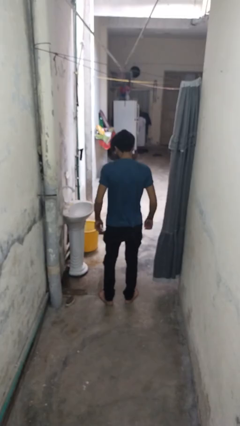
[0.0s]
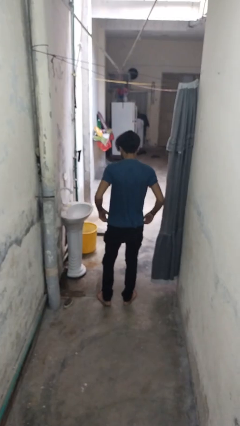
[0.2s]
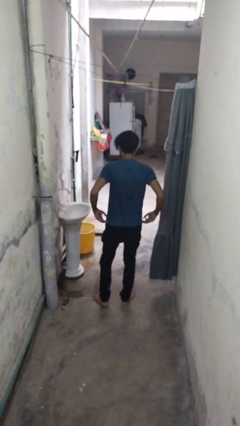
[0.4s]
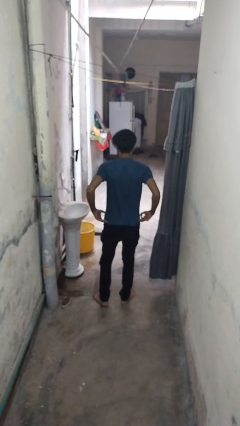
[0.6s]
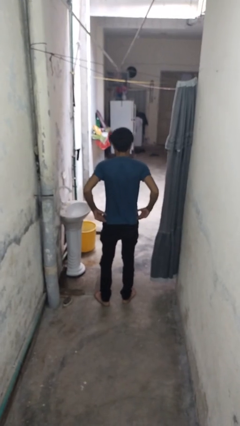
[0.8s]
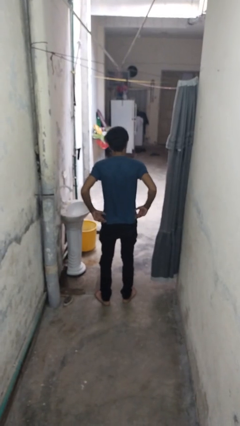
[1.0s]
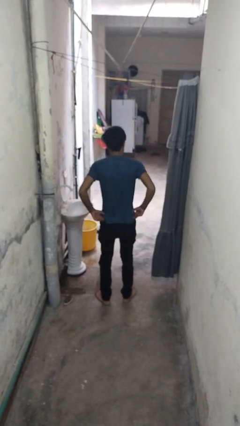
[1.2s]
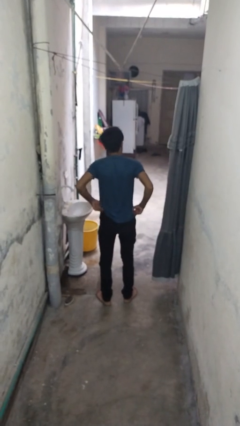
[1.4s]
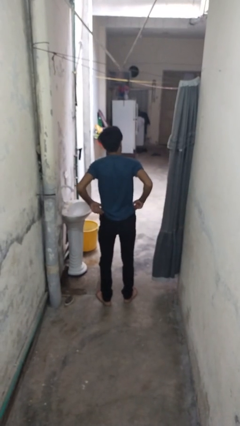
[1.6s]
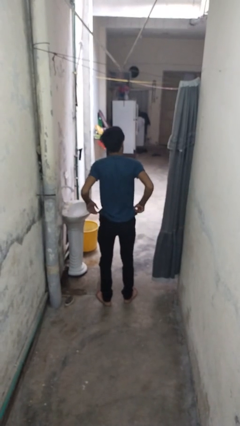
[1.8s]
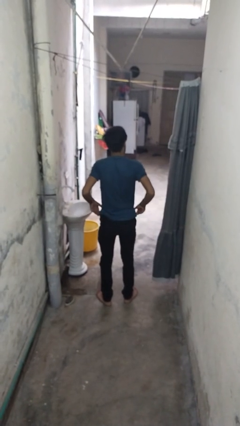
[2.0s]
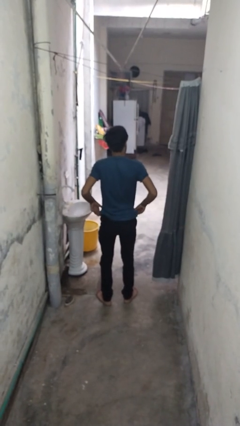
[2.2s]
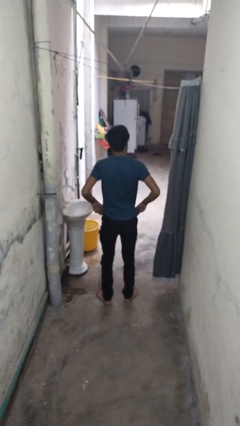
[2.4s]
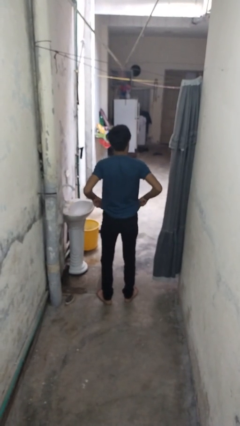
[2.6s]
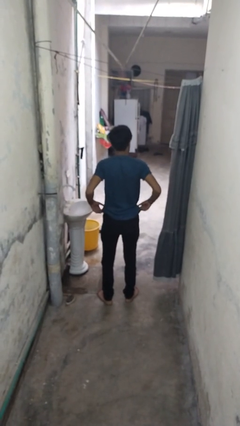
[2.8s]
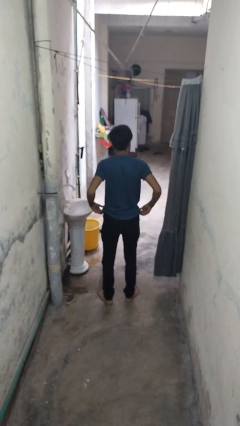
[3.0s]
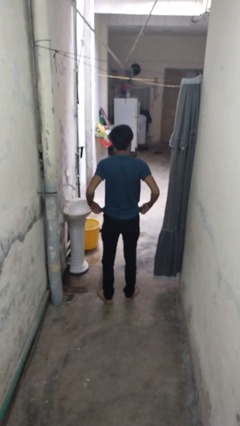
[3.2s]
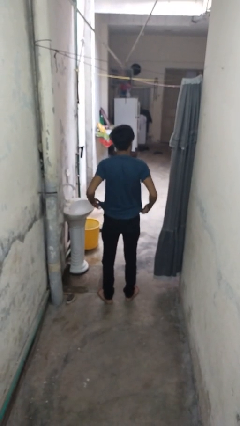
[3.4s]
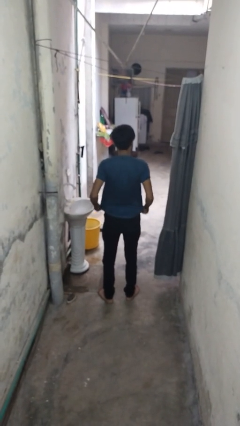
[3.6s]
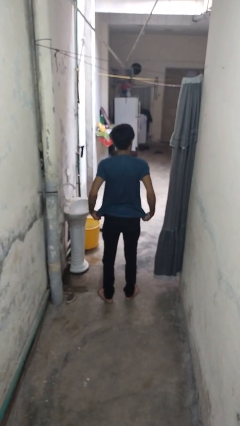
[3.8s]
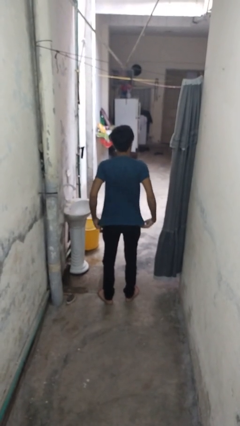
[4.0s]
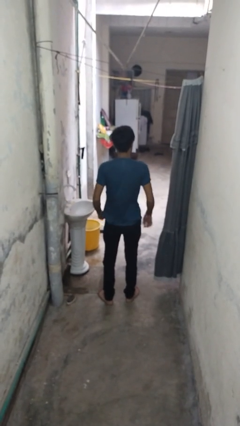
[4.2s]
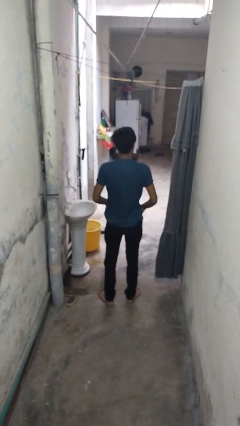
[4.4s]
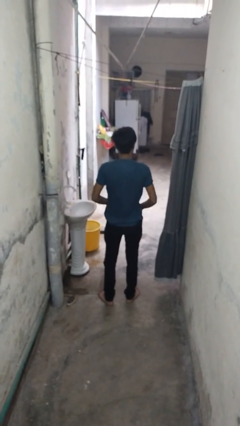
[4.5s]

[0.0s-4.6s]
person hikes up pants

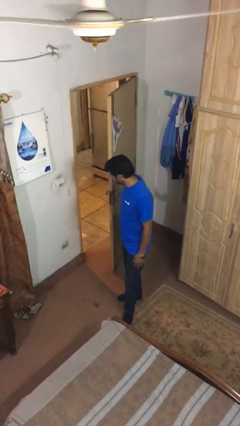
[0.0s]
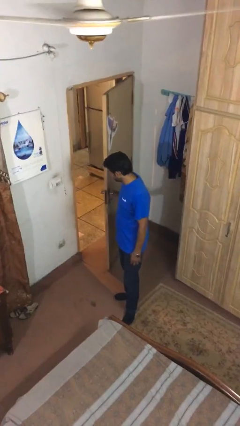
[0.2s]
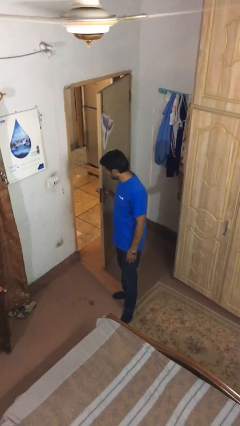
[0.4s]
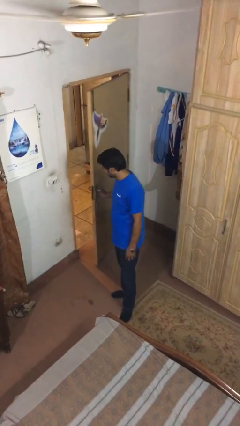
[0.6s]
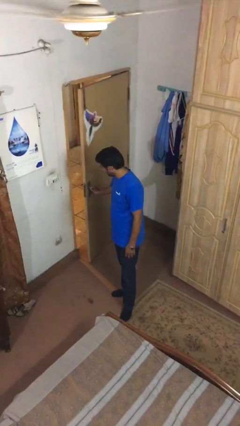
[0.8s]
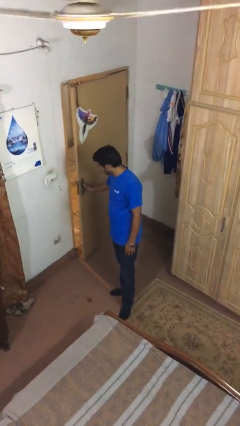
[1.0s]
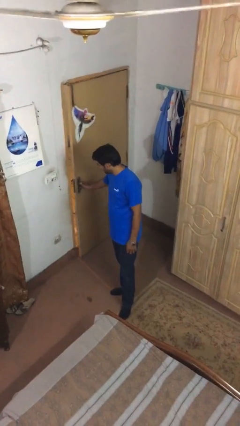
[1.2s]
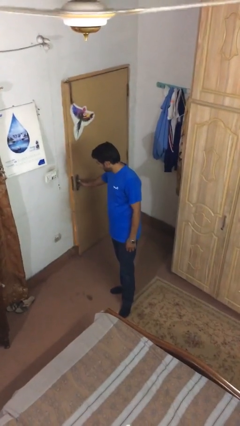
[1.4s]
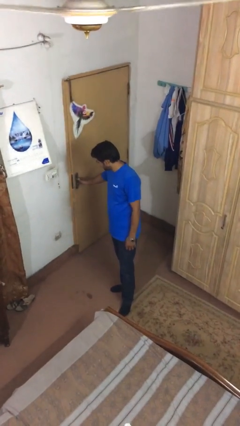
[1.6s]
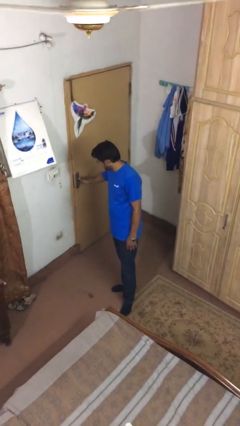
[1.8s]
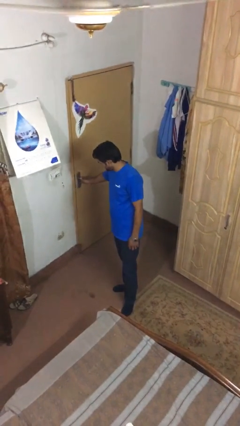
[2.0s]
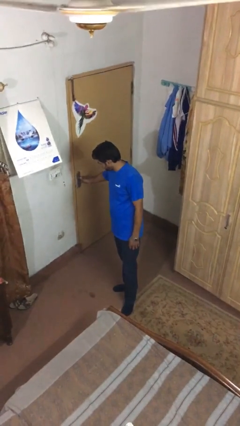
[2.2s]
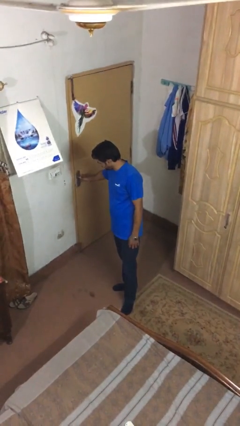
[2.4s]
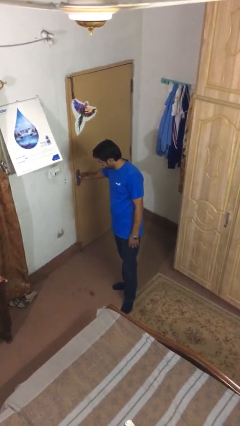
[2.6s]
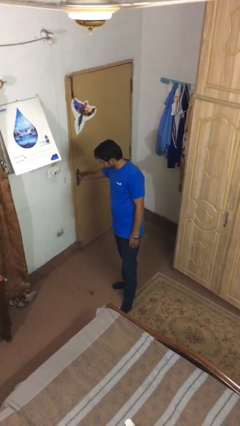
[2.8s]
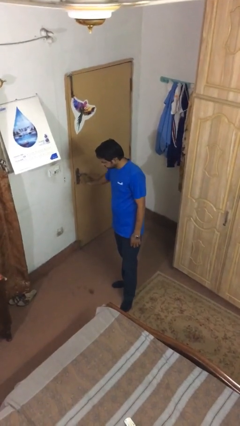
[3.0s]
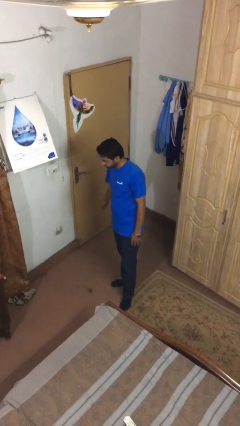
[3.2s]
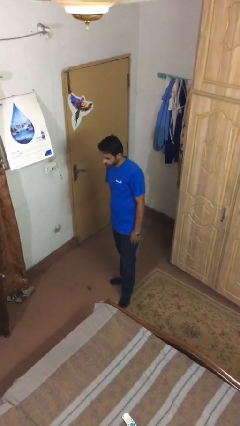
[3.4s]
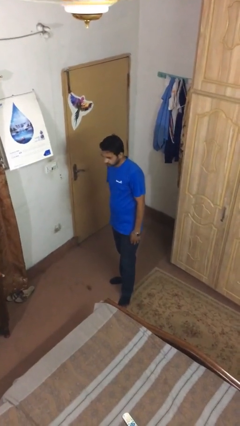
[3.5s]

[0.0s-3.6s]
person closes facility door

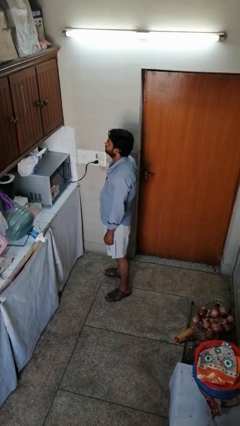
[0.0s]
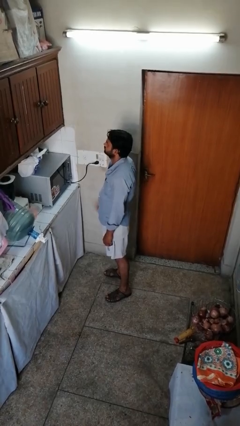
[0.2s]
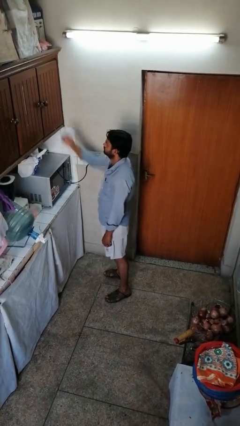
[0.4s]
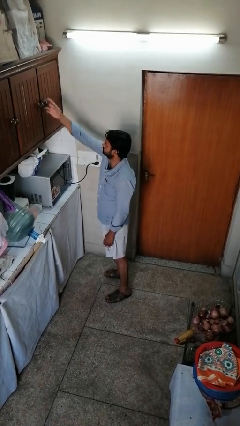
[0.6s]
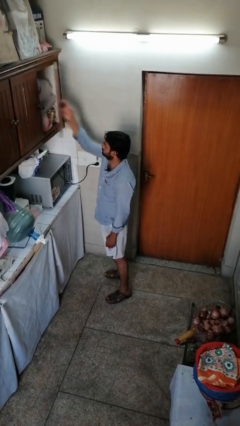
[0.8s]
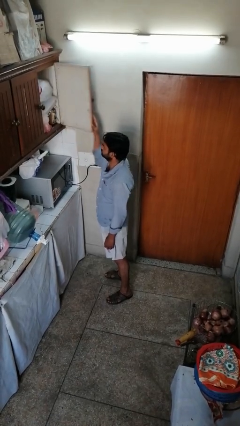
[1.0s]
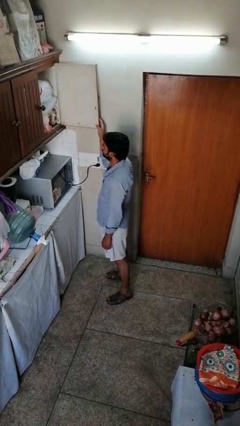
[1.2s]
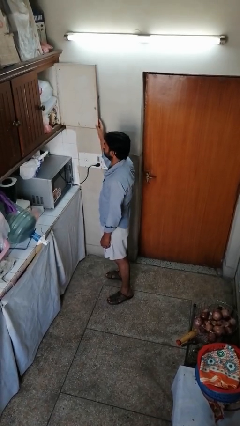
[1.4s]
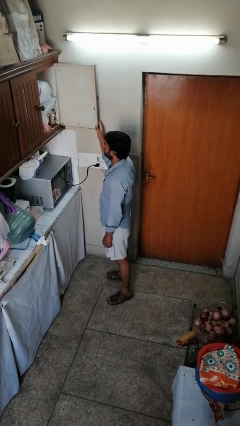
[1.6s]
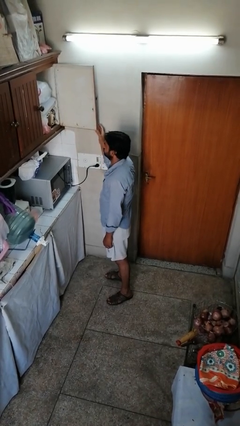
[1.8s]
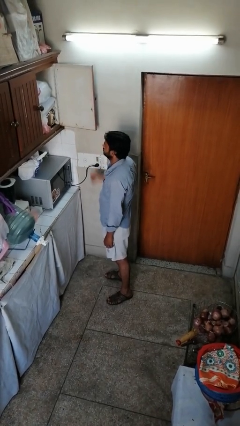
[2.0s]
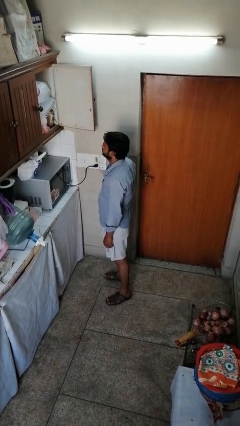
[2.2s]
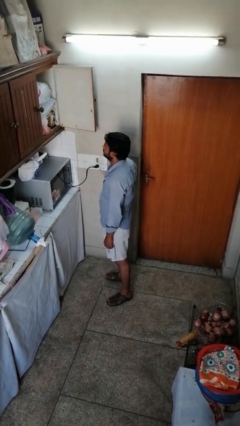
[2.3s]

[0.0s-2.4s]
person opens cabinet

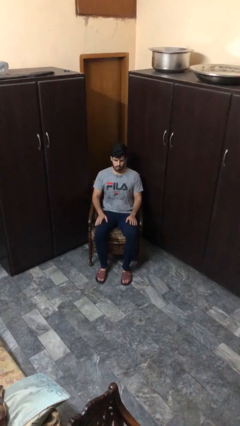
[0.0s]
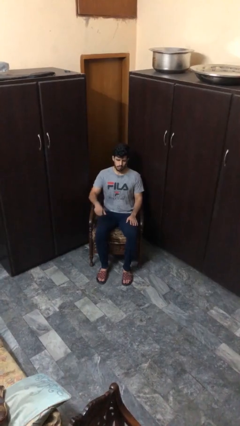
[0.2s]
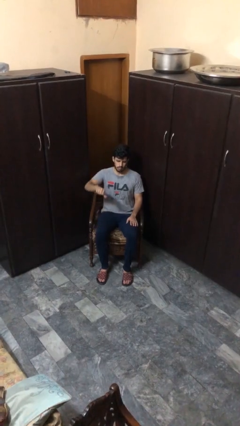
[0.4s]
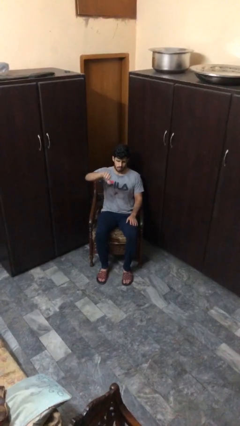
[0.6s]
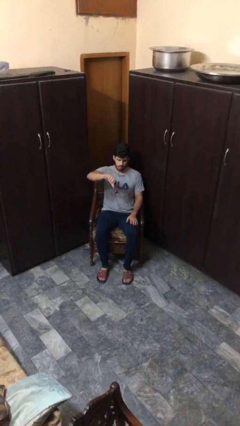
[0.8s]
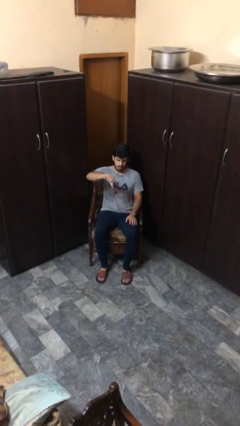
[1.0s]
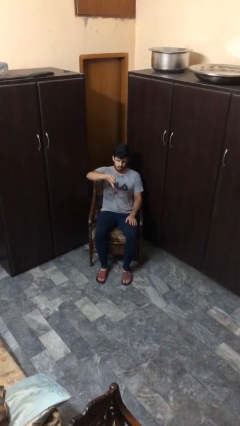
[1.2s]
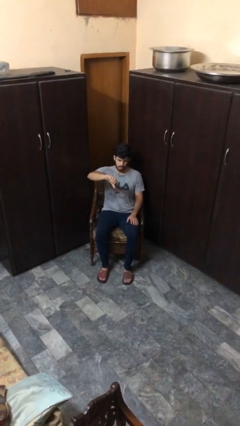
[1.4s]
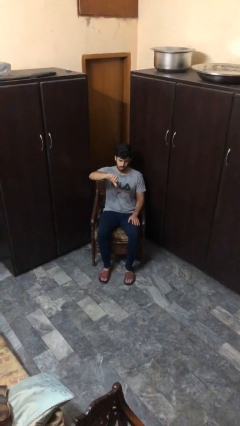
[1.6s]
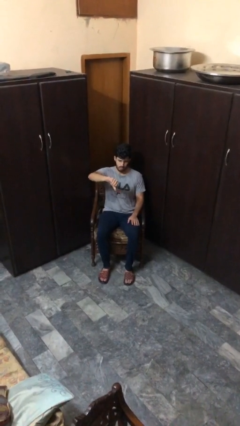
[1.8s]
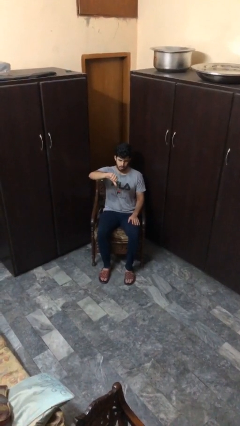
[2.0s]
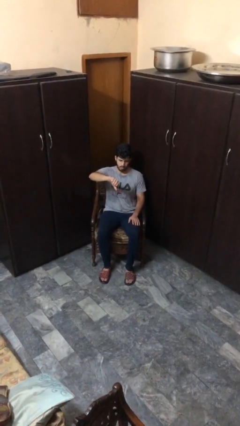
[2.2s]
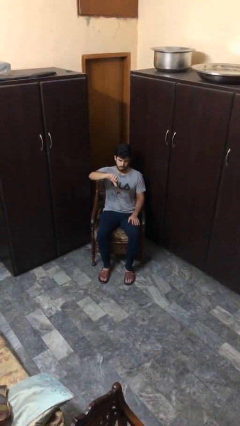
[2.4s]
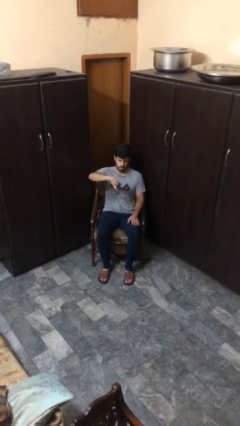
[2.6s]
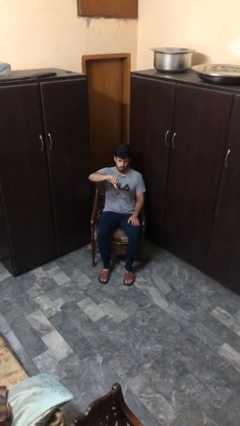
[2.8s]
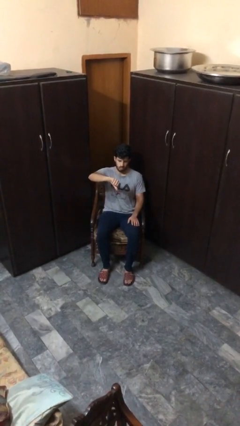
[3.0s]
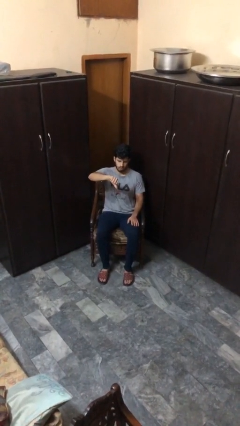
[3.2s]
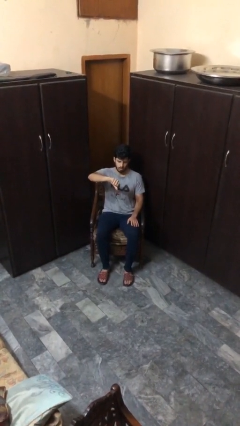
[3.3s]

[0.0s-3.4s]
person gestures thumbs down

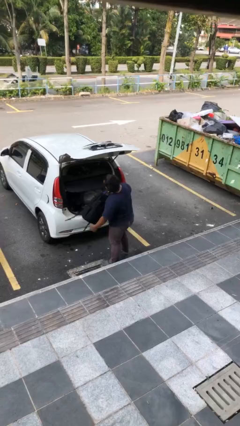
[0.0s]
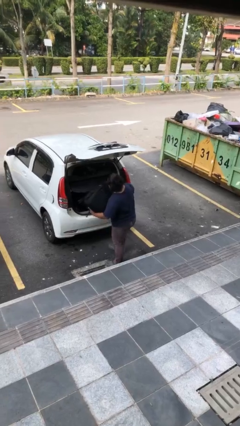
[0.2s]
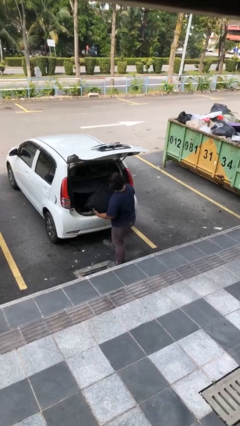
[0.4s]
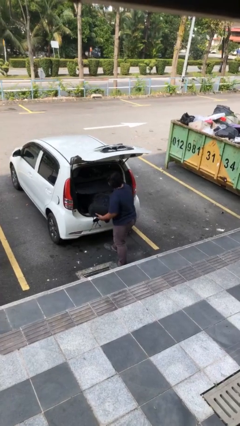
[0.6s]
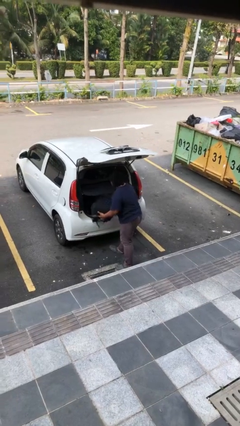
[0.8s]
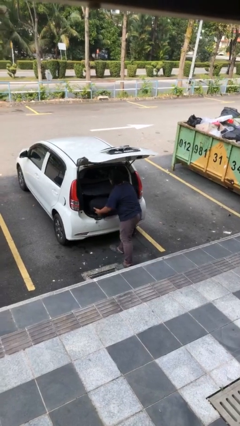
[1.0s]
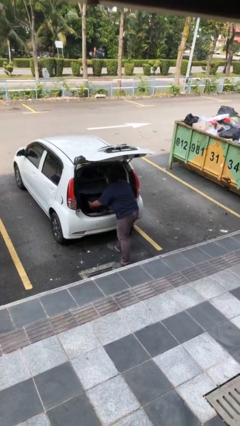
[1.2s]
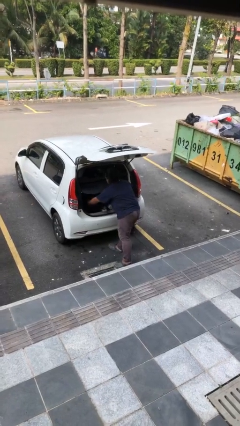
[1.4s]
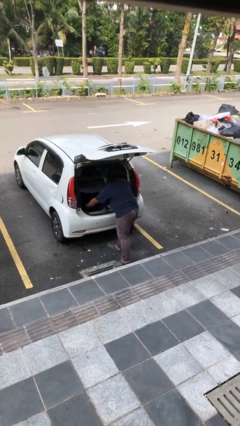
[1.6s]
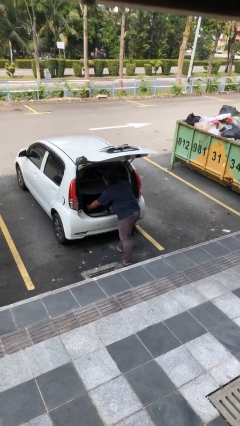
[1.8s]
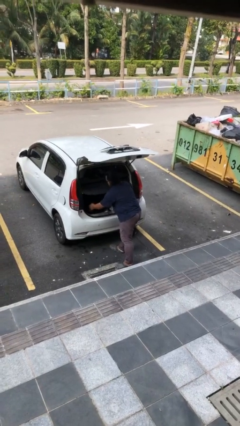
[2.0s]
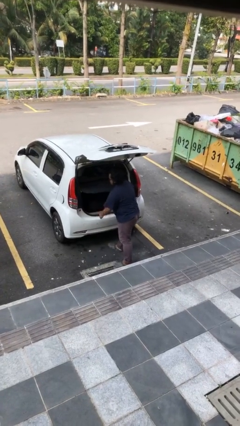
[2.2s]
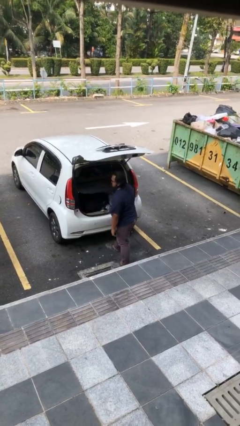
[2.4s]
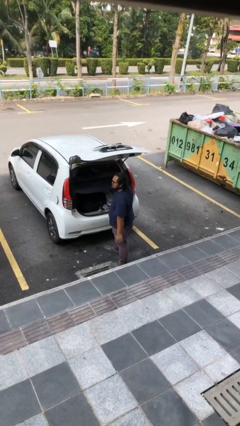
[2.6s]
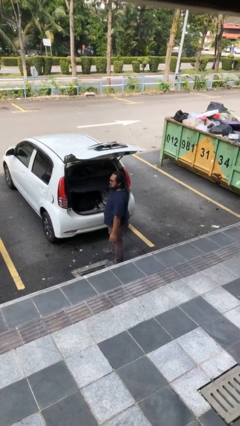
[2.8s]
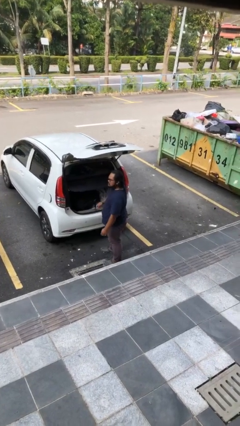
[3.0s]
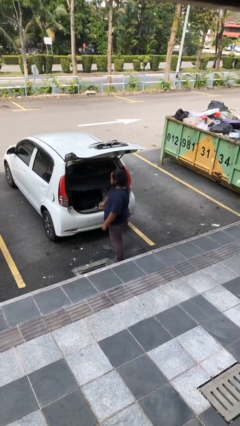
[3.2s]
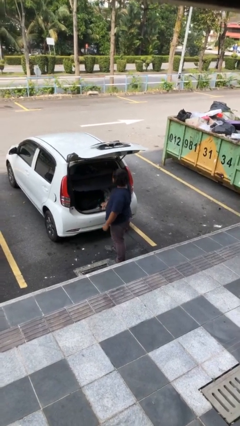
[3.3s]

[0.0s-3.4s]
person loads car
